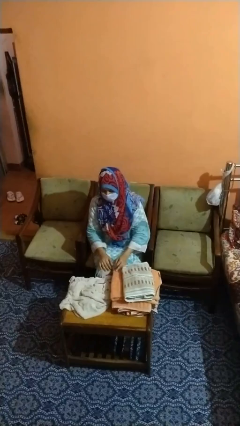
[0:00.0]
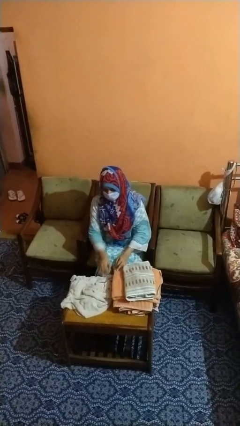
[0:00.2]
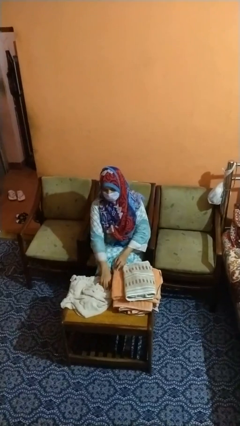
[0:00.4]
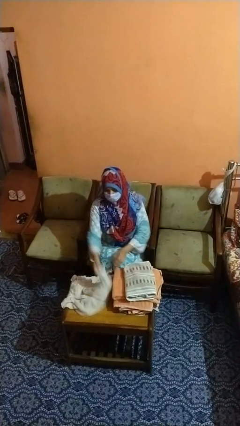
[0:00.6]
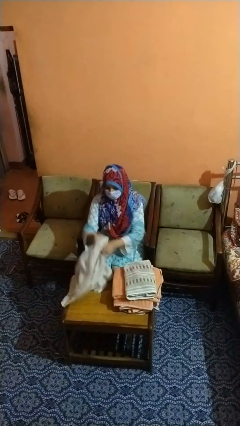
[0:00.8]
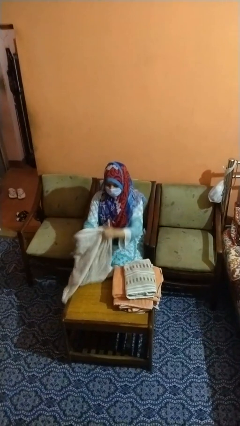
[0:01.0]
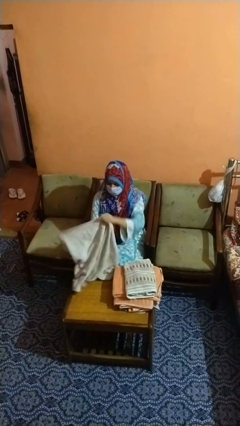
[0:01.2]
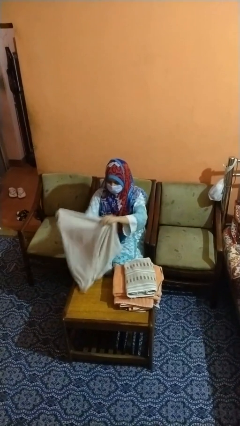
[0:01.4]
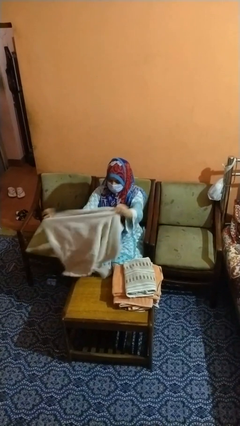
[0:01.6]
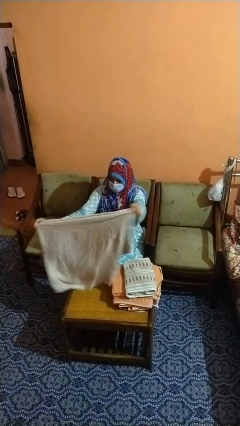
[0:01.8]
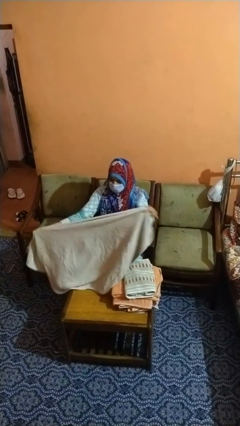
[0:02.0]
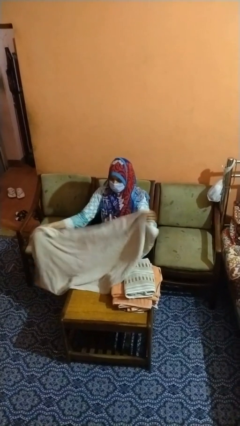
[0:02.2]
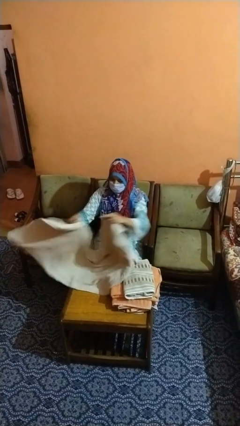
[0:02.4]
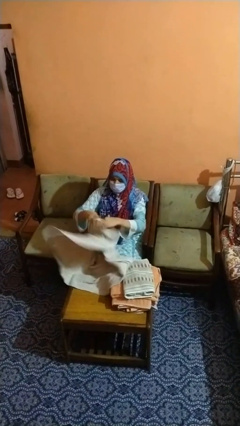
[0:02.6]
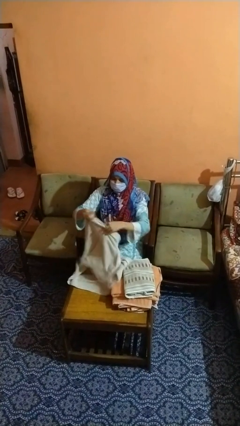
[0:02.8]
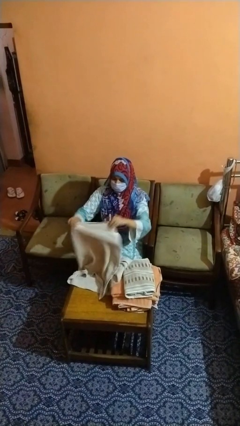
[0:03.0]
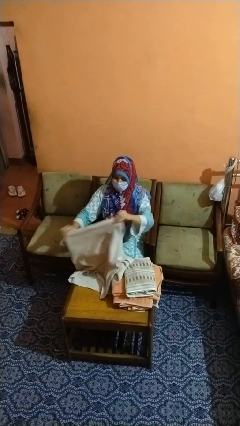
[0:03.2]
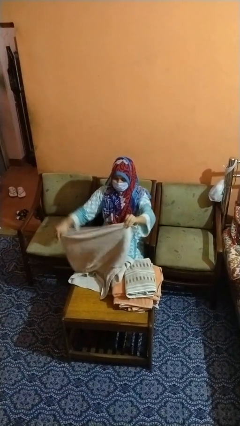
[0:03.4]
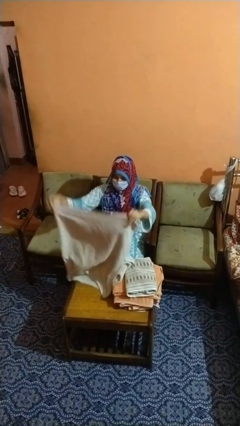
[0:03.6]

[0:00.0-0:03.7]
person folds towel

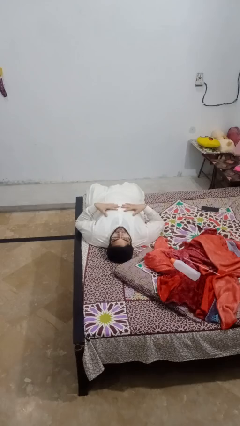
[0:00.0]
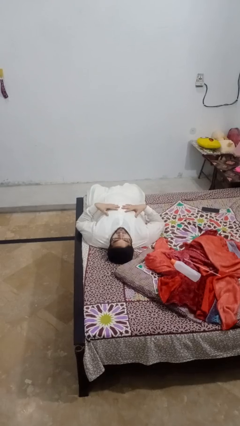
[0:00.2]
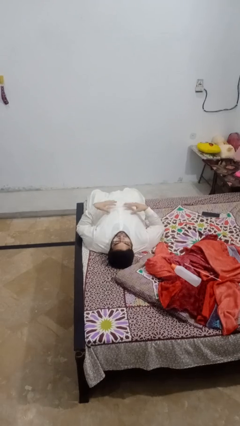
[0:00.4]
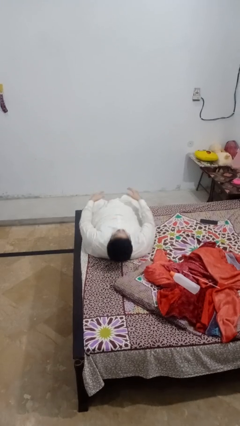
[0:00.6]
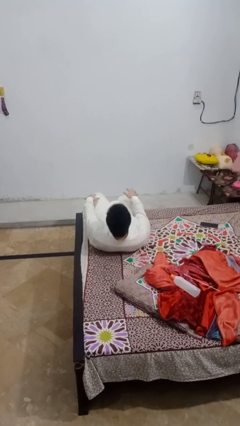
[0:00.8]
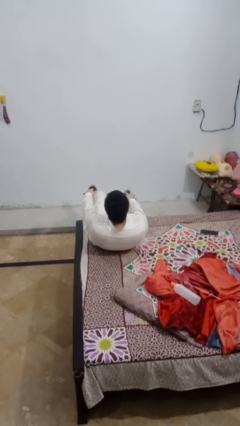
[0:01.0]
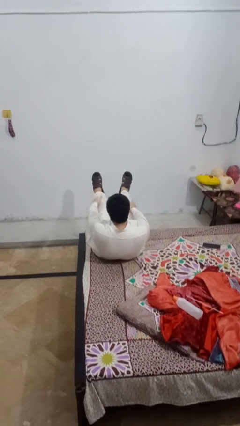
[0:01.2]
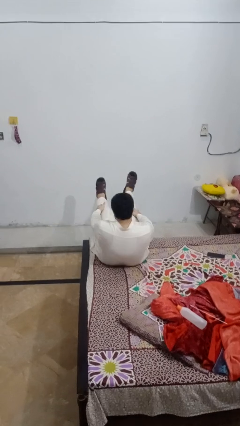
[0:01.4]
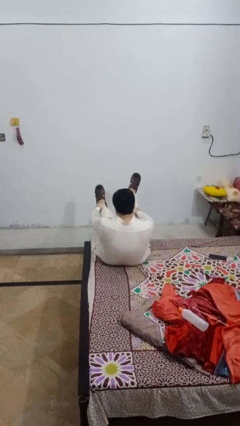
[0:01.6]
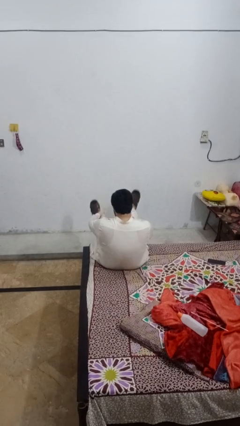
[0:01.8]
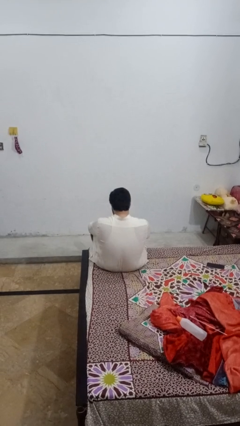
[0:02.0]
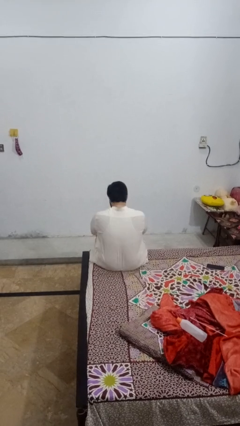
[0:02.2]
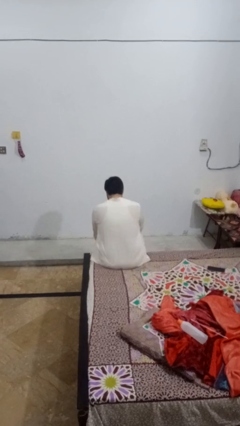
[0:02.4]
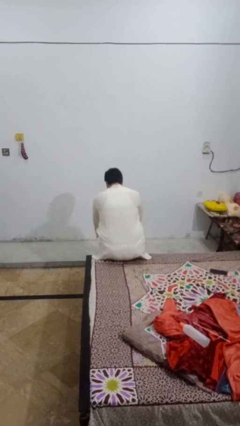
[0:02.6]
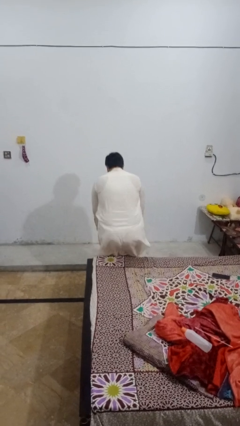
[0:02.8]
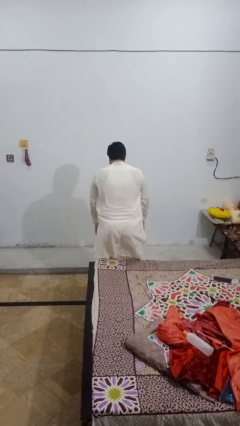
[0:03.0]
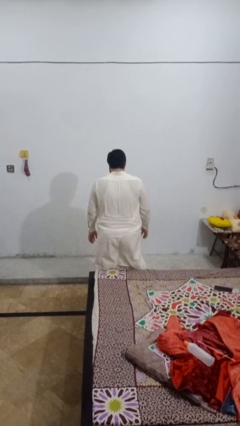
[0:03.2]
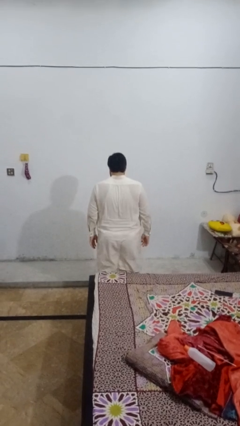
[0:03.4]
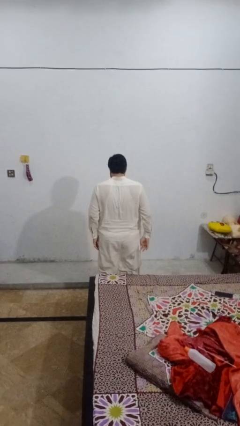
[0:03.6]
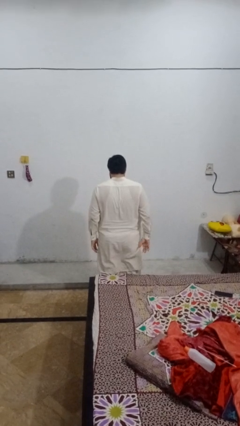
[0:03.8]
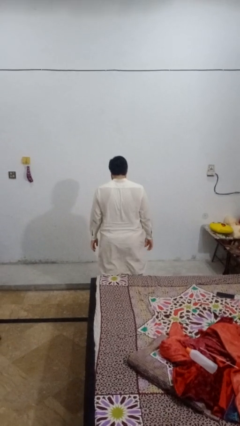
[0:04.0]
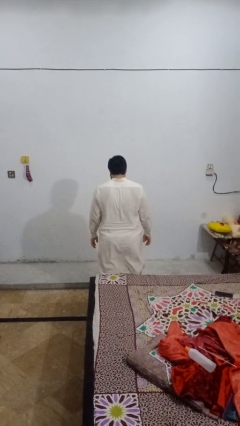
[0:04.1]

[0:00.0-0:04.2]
person stands up

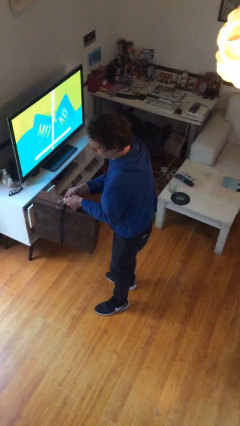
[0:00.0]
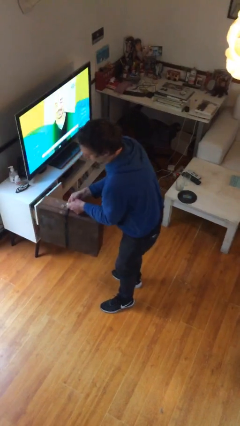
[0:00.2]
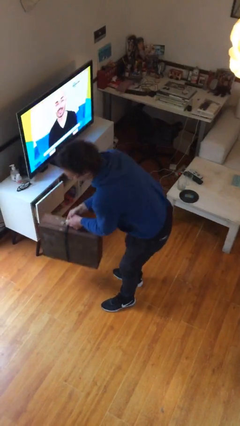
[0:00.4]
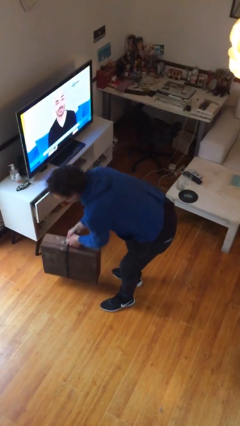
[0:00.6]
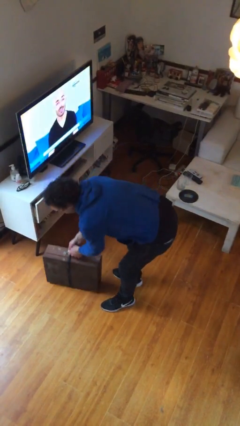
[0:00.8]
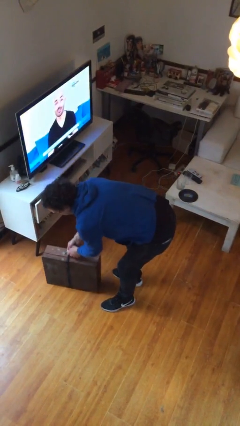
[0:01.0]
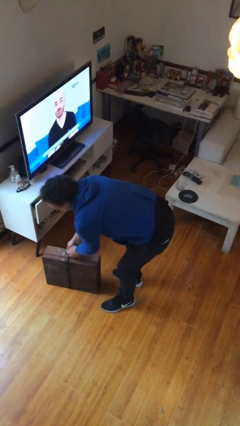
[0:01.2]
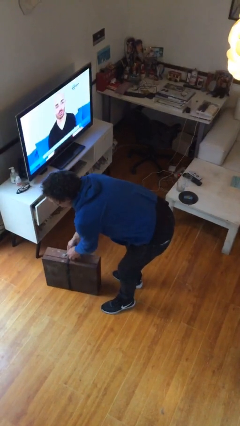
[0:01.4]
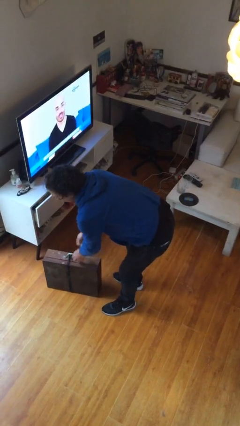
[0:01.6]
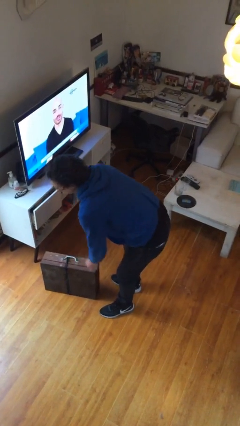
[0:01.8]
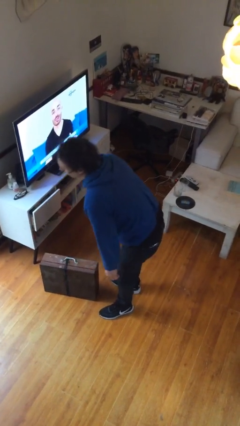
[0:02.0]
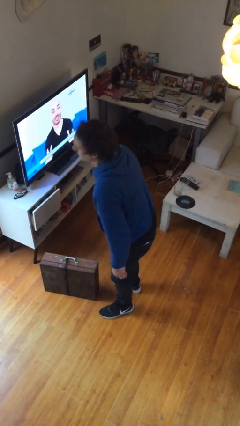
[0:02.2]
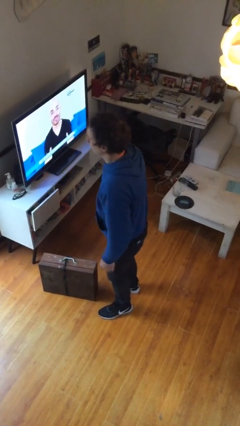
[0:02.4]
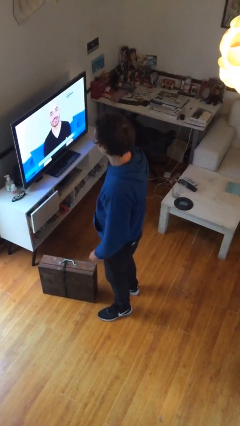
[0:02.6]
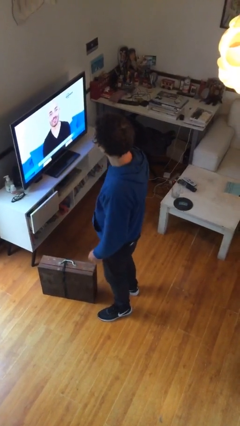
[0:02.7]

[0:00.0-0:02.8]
person puts down object on floor

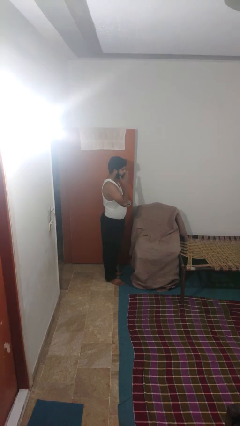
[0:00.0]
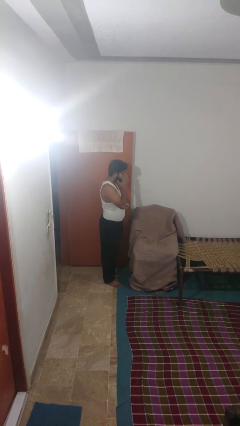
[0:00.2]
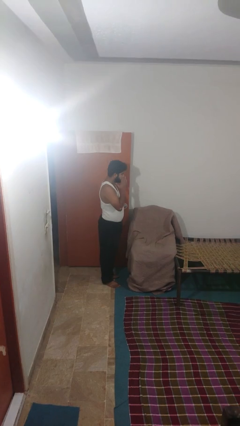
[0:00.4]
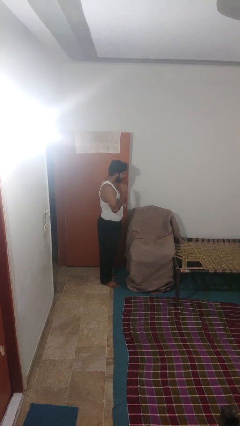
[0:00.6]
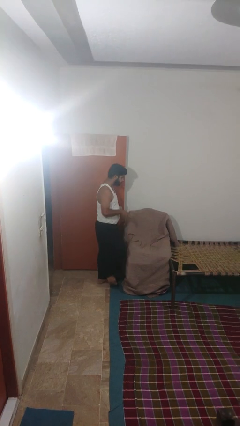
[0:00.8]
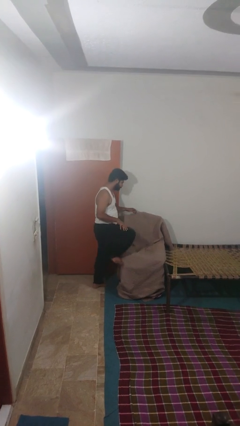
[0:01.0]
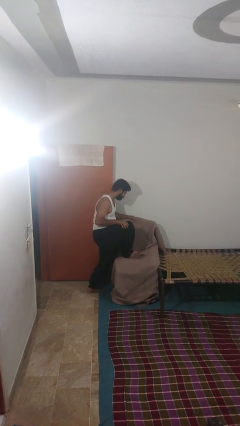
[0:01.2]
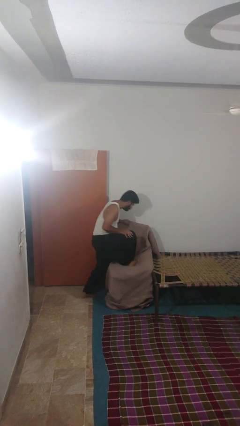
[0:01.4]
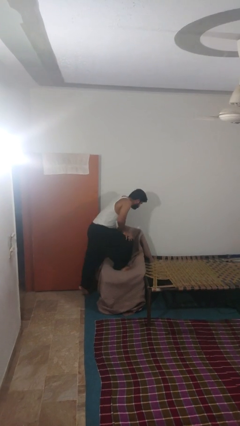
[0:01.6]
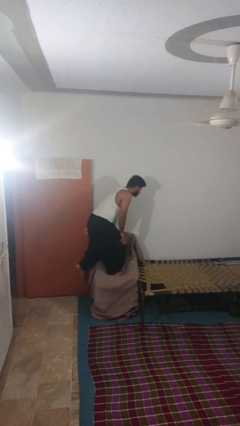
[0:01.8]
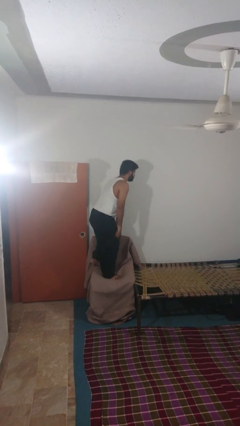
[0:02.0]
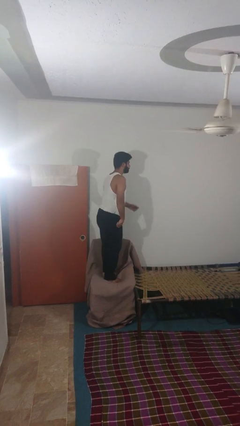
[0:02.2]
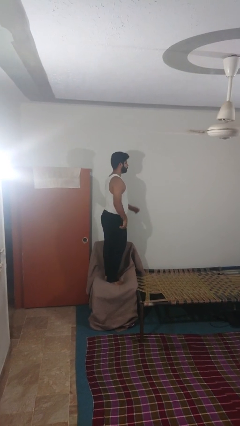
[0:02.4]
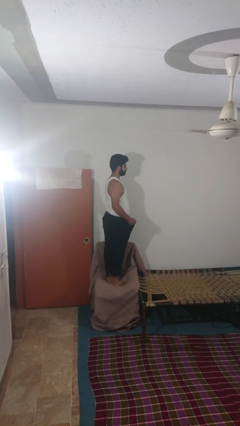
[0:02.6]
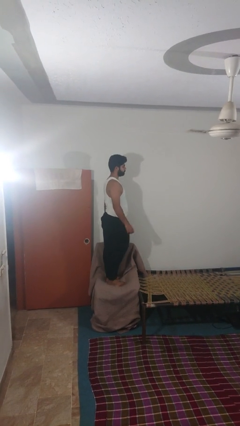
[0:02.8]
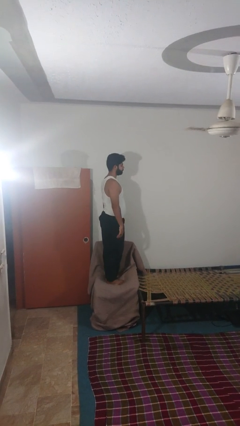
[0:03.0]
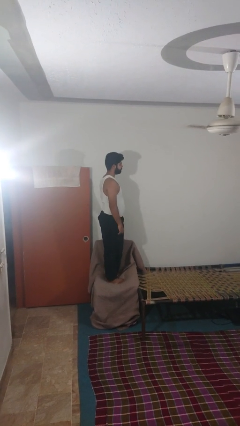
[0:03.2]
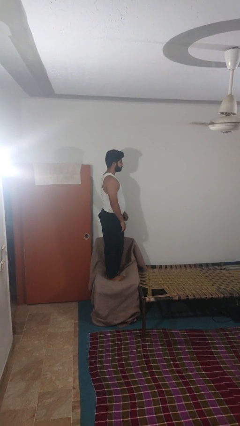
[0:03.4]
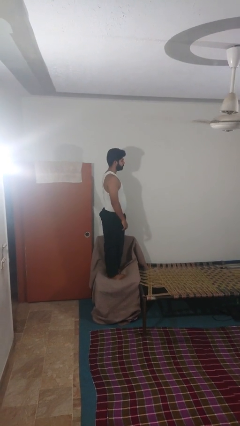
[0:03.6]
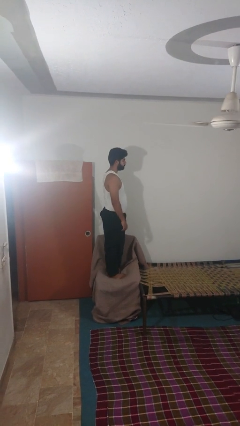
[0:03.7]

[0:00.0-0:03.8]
person climbs on couch

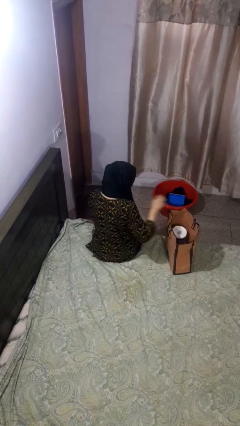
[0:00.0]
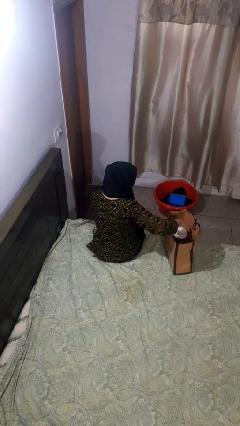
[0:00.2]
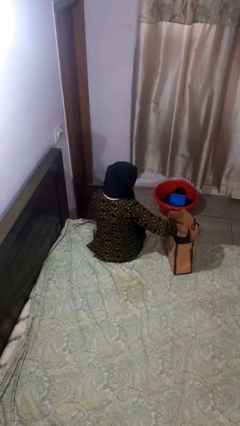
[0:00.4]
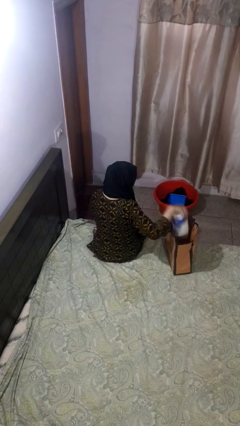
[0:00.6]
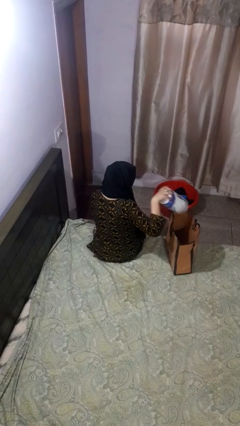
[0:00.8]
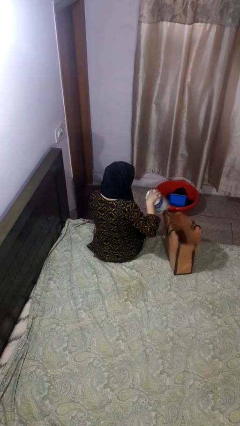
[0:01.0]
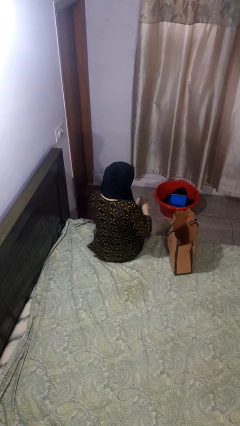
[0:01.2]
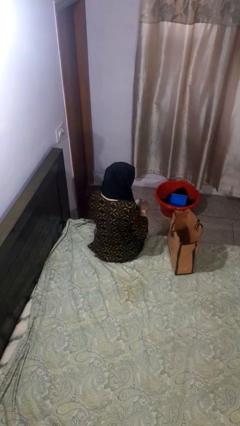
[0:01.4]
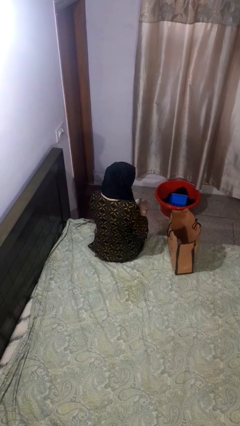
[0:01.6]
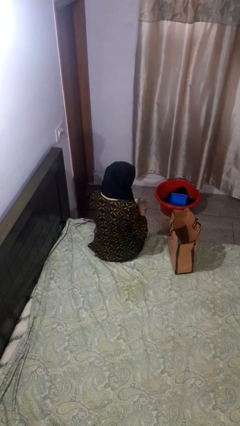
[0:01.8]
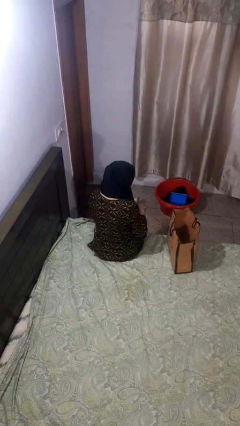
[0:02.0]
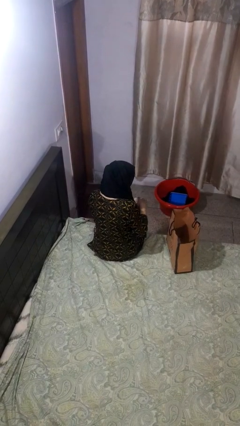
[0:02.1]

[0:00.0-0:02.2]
person takes object from bag

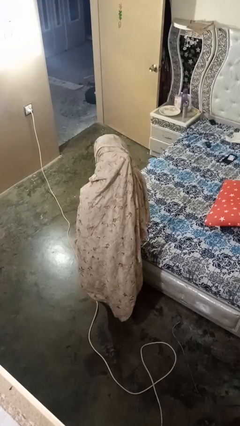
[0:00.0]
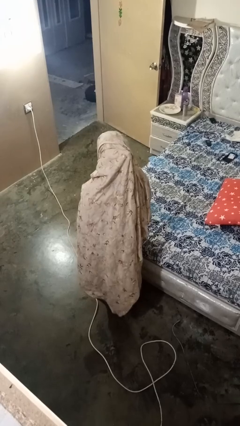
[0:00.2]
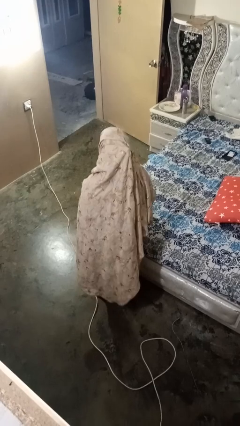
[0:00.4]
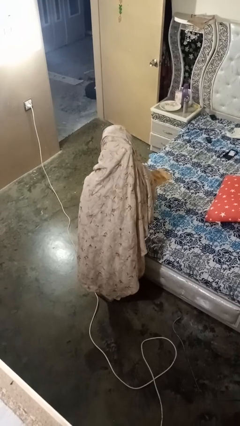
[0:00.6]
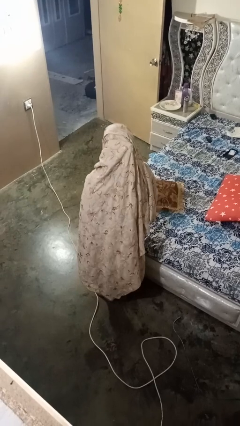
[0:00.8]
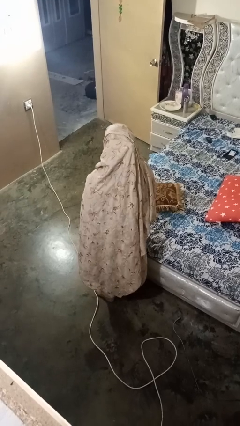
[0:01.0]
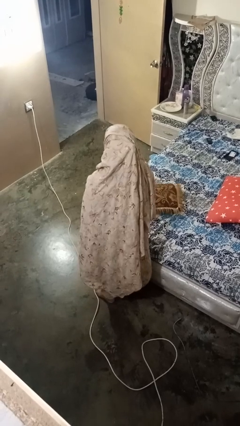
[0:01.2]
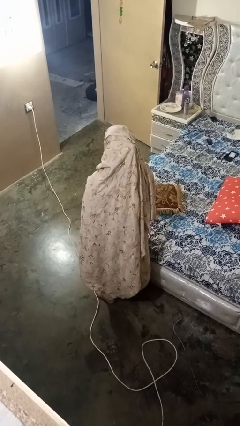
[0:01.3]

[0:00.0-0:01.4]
person puts down object on bed
